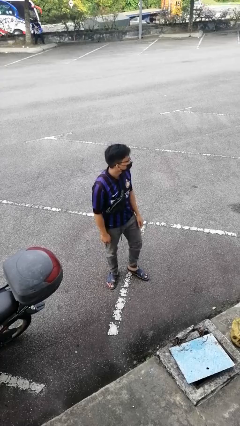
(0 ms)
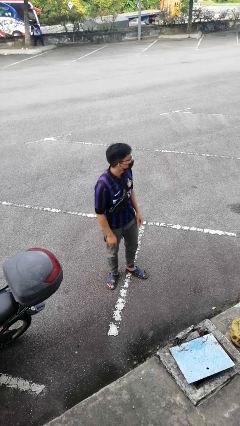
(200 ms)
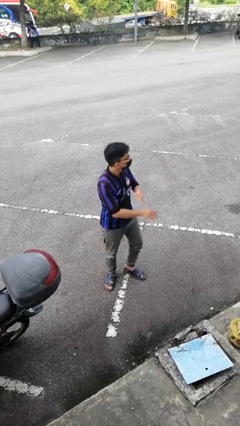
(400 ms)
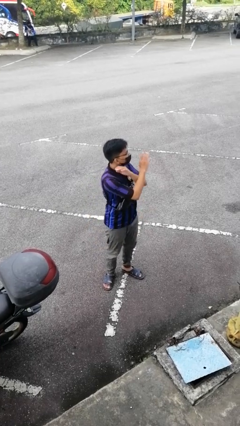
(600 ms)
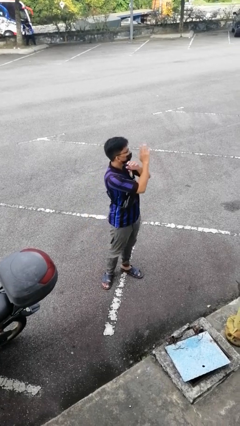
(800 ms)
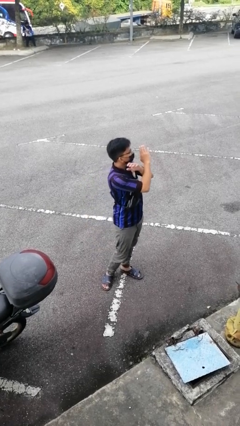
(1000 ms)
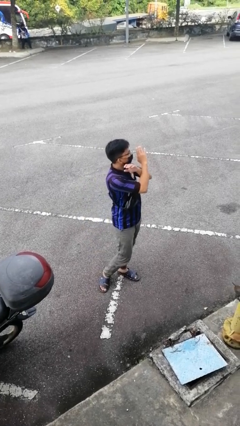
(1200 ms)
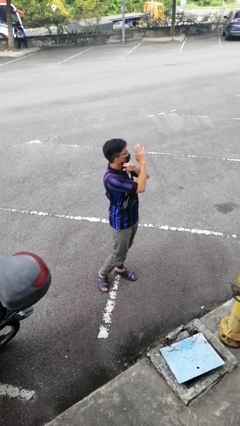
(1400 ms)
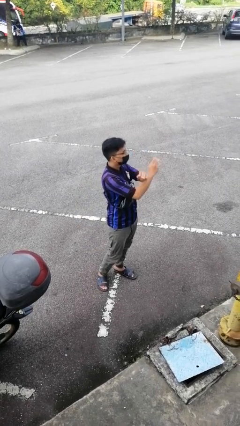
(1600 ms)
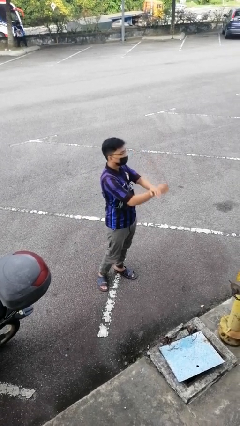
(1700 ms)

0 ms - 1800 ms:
person gestures arms x

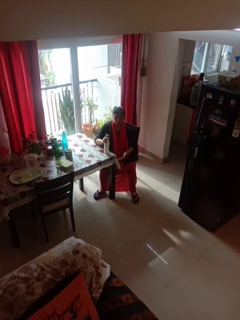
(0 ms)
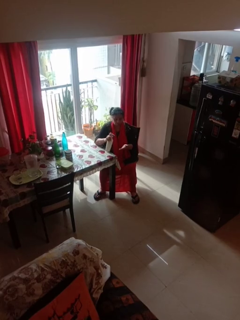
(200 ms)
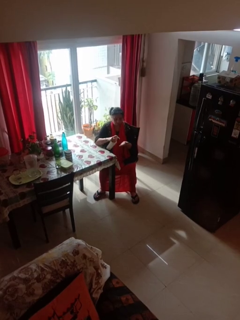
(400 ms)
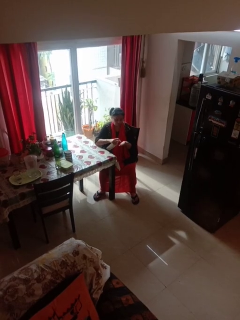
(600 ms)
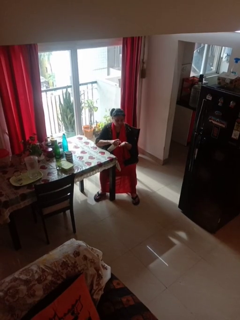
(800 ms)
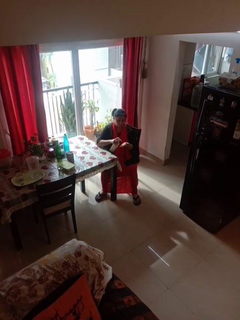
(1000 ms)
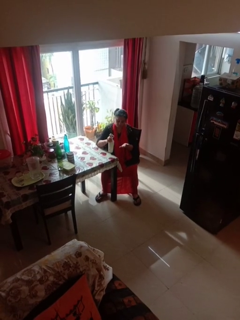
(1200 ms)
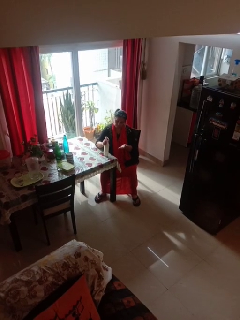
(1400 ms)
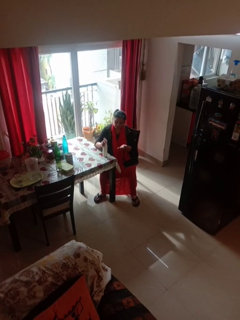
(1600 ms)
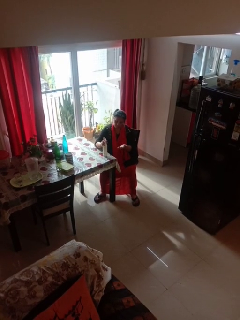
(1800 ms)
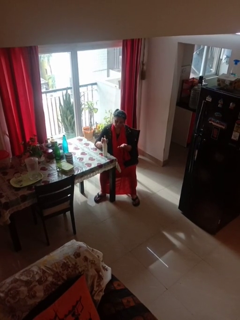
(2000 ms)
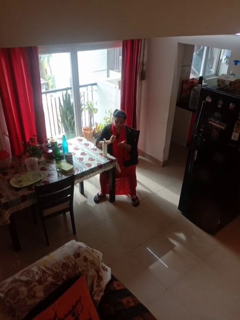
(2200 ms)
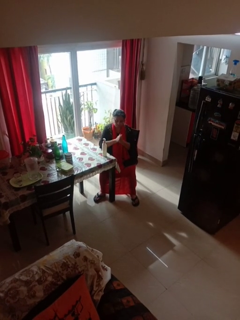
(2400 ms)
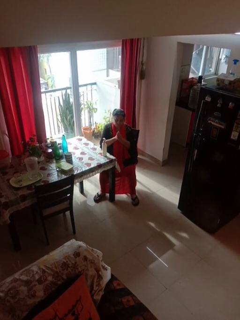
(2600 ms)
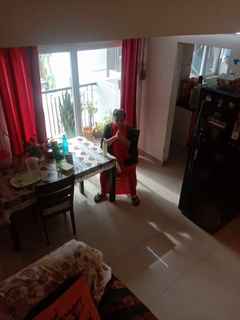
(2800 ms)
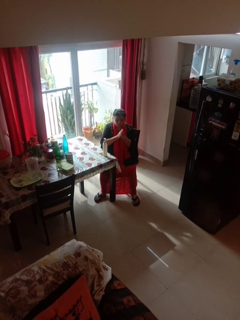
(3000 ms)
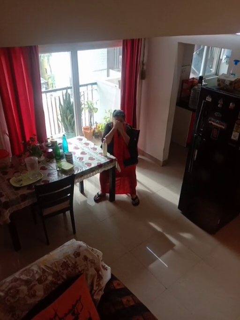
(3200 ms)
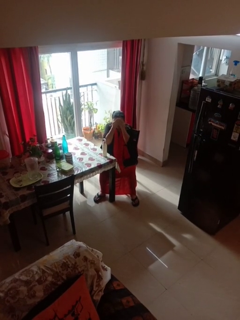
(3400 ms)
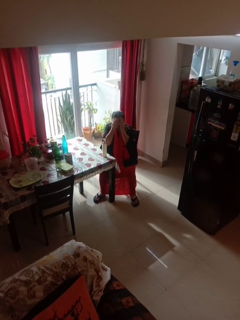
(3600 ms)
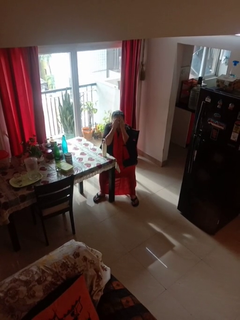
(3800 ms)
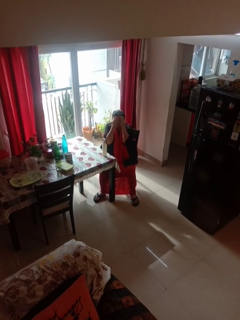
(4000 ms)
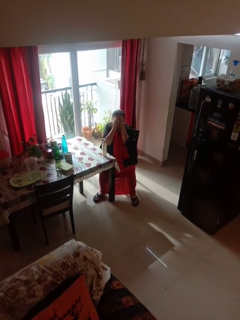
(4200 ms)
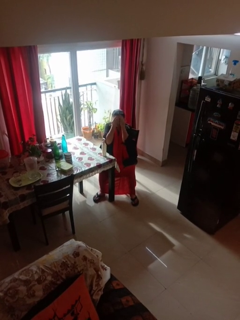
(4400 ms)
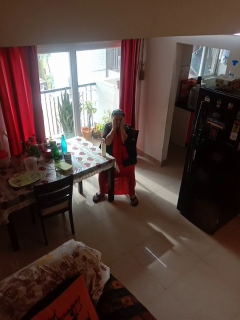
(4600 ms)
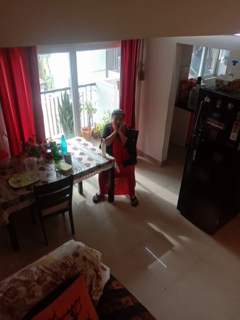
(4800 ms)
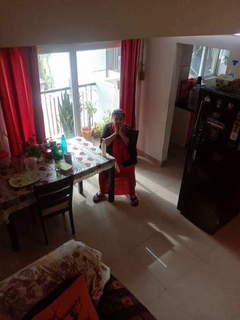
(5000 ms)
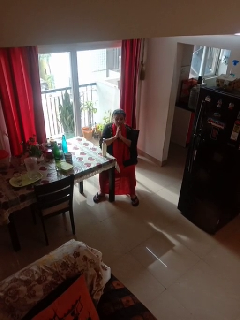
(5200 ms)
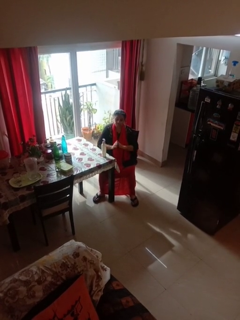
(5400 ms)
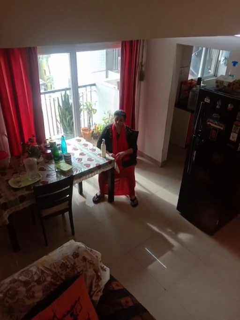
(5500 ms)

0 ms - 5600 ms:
person applies facial moisturizer

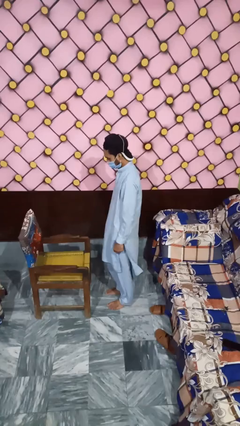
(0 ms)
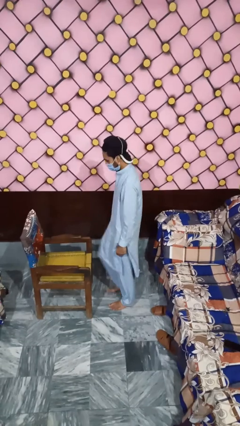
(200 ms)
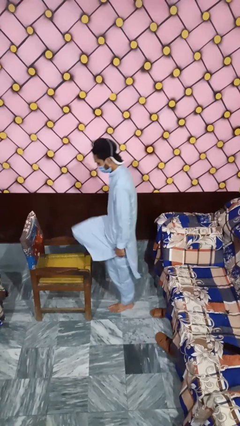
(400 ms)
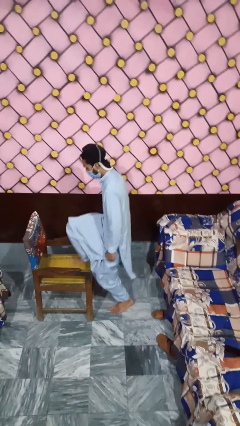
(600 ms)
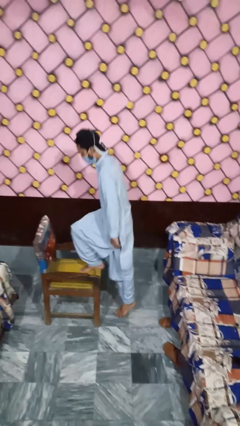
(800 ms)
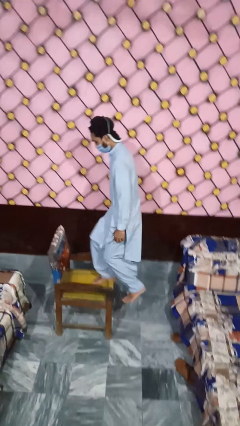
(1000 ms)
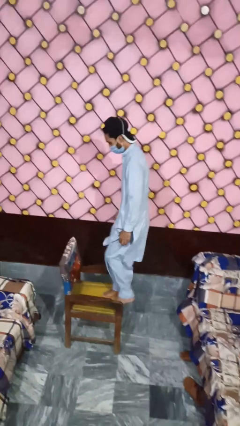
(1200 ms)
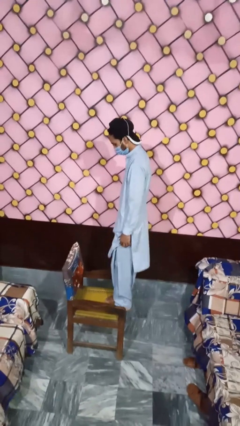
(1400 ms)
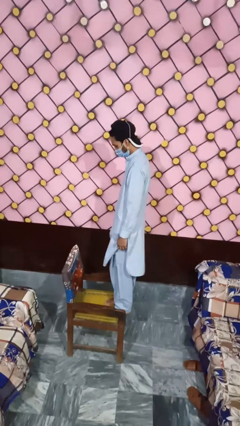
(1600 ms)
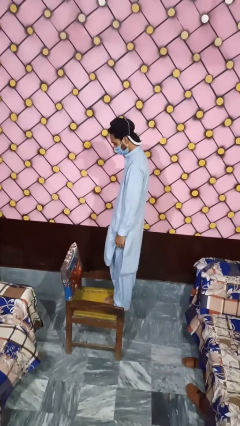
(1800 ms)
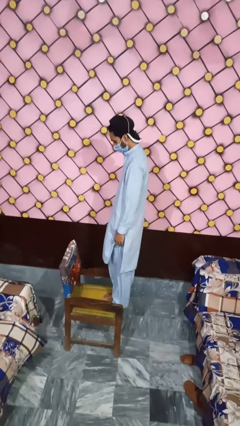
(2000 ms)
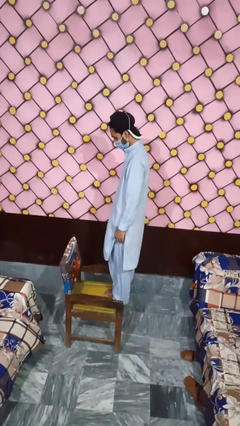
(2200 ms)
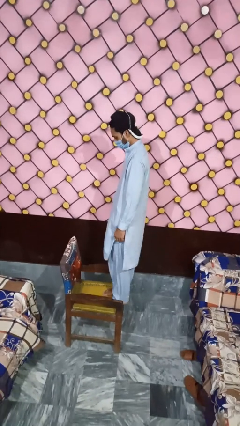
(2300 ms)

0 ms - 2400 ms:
person climbs on chair

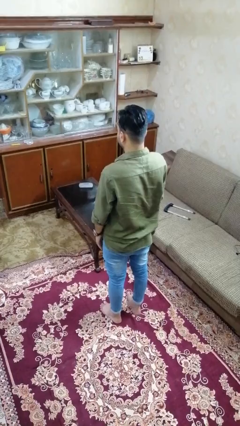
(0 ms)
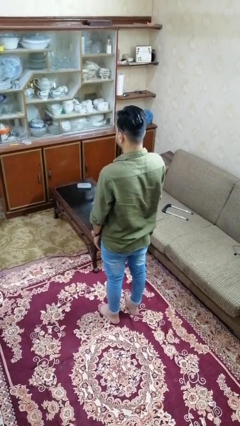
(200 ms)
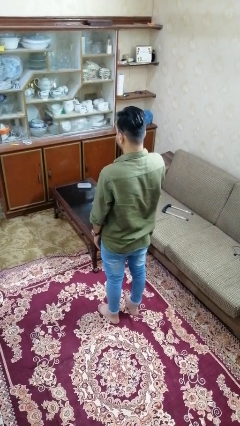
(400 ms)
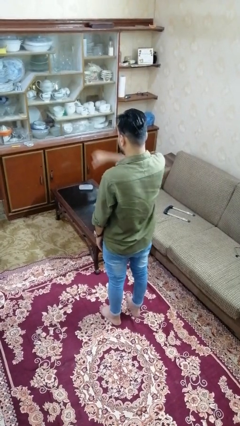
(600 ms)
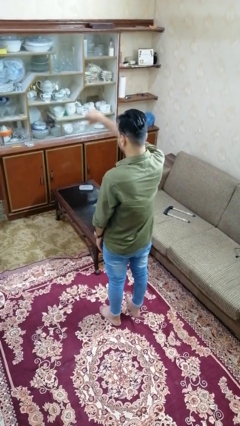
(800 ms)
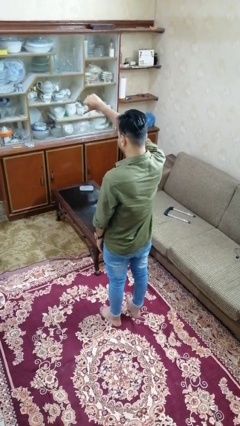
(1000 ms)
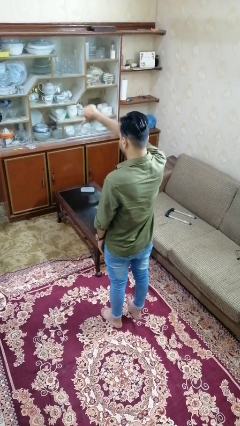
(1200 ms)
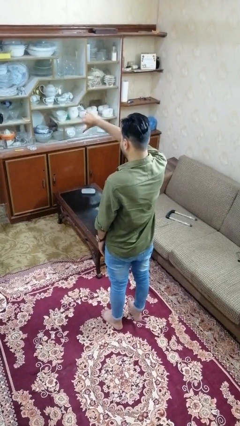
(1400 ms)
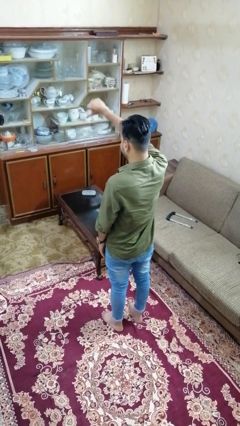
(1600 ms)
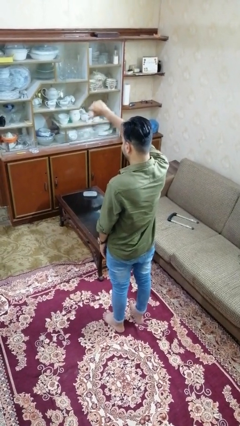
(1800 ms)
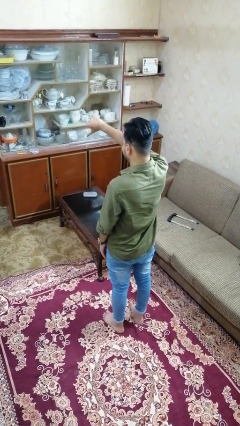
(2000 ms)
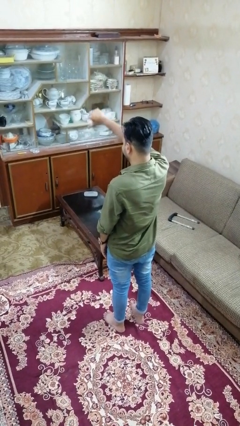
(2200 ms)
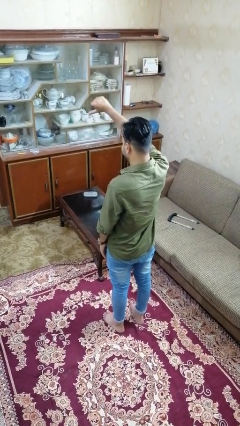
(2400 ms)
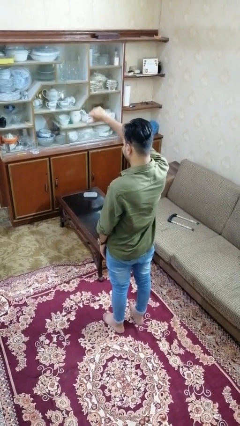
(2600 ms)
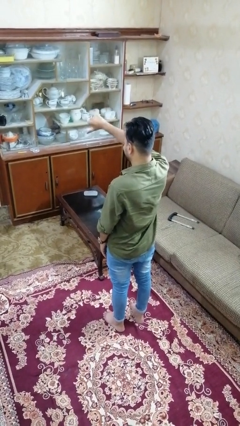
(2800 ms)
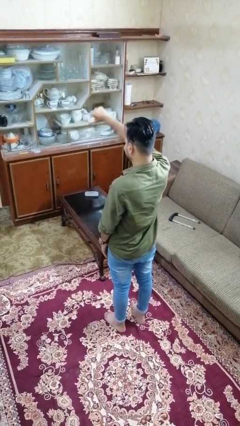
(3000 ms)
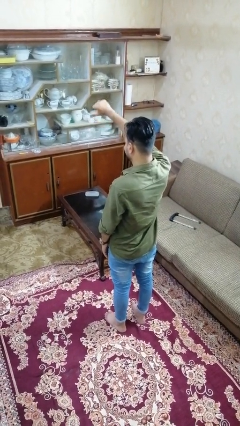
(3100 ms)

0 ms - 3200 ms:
person gestures thumbs down

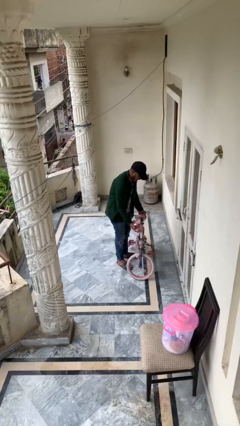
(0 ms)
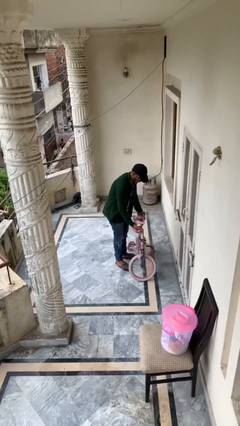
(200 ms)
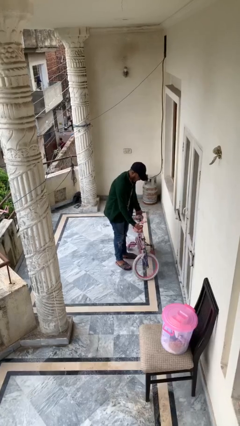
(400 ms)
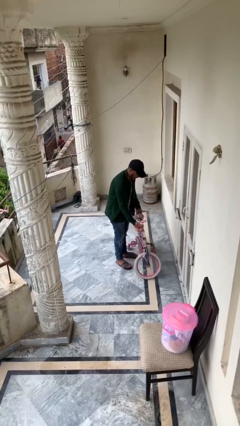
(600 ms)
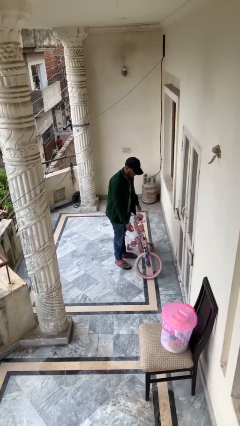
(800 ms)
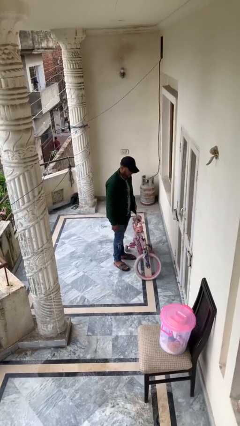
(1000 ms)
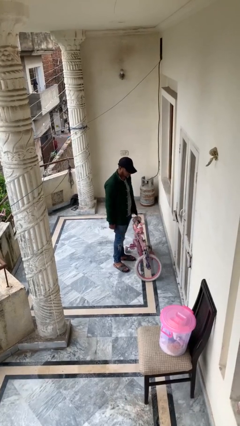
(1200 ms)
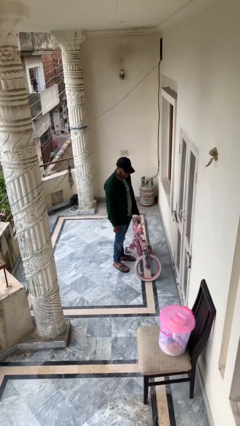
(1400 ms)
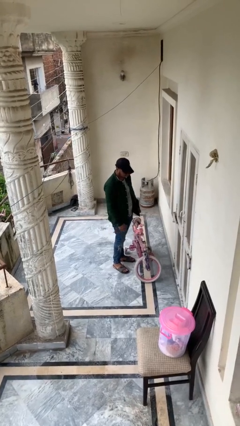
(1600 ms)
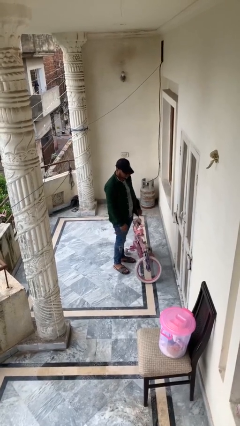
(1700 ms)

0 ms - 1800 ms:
person puts down object on floor

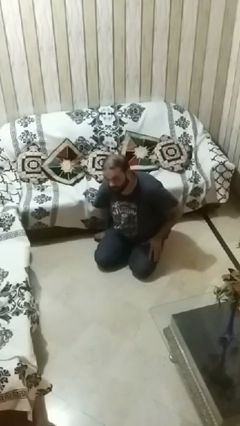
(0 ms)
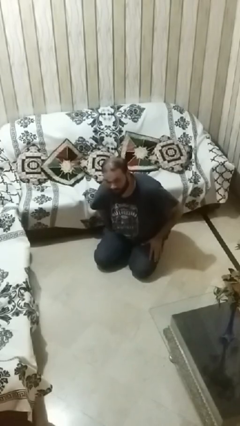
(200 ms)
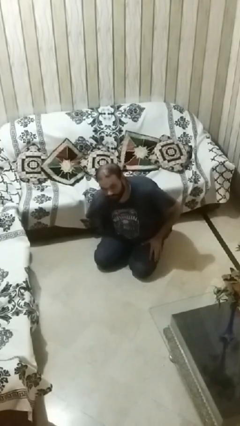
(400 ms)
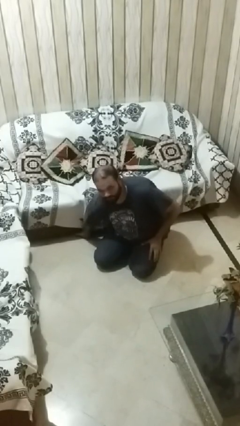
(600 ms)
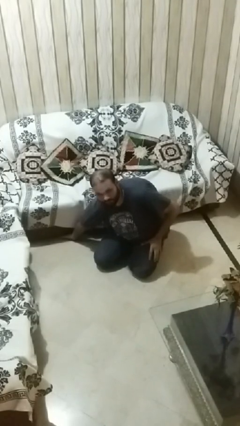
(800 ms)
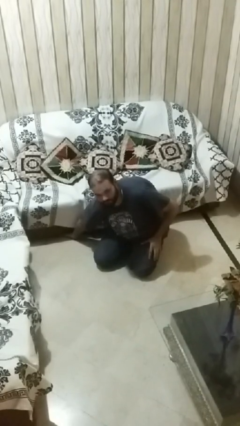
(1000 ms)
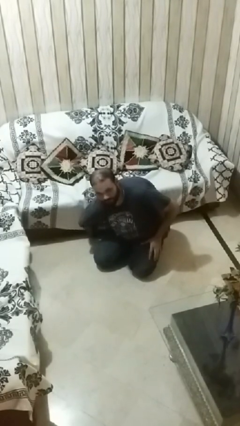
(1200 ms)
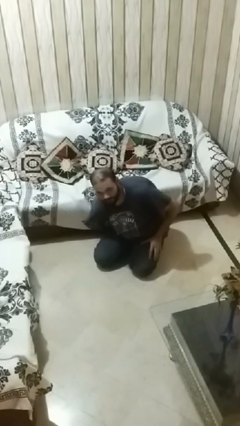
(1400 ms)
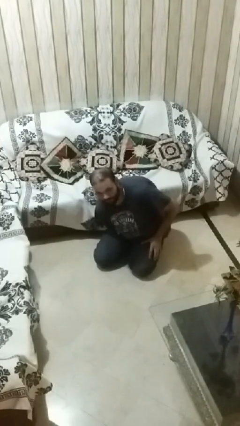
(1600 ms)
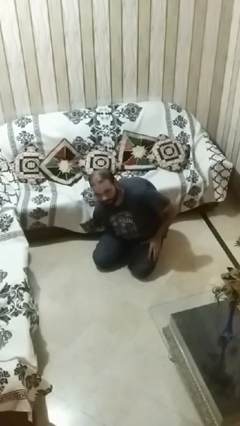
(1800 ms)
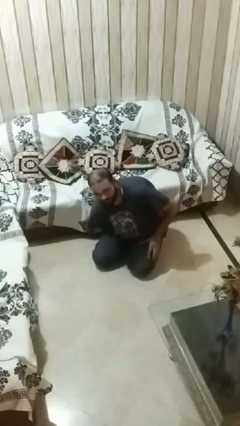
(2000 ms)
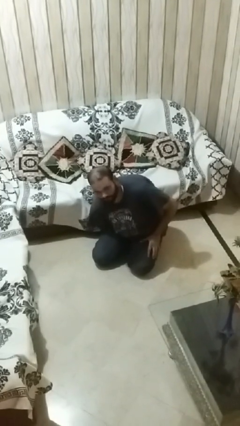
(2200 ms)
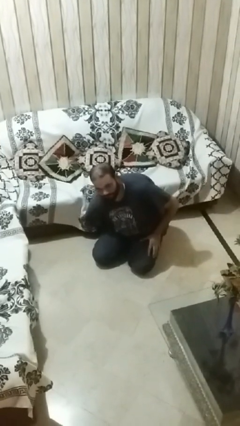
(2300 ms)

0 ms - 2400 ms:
person searches under couch

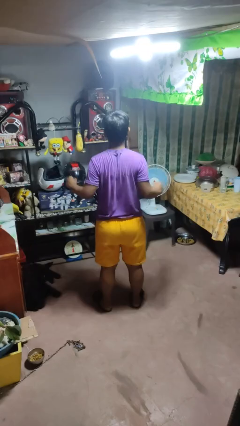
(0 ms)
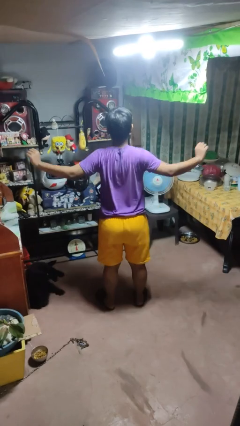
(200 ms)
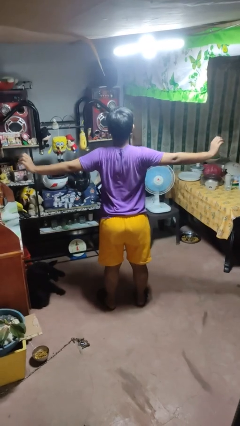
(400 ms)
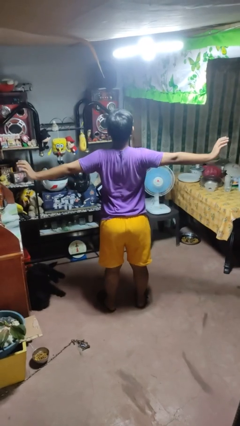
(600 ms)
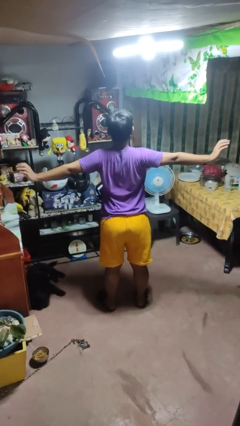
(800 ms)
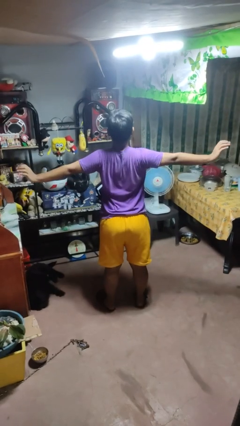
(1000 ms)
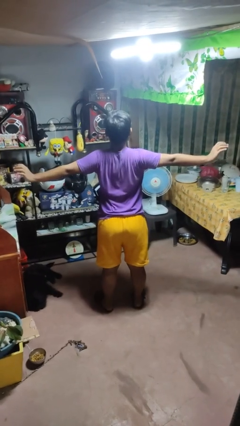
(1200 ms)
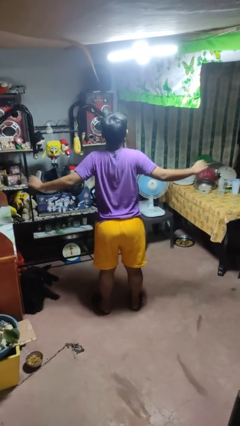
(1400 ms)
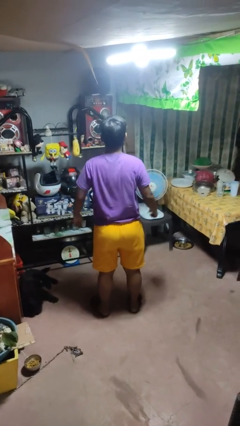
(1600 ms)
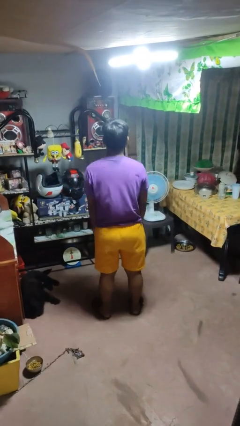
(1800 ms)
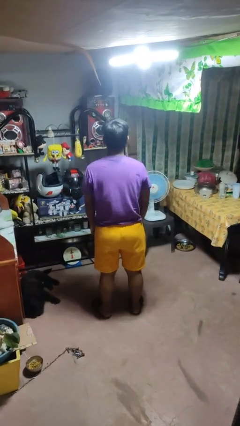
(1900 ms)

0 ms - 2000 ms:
person stretches arms to side
